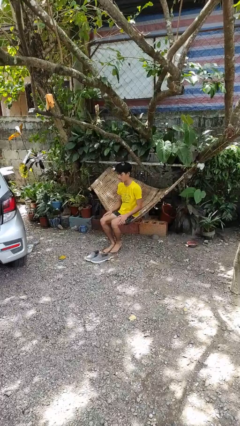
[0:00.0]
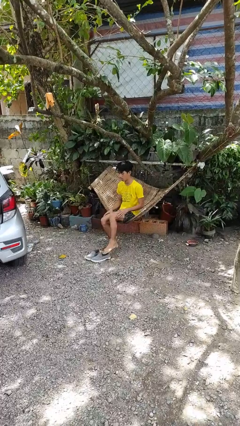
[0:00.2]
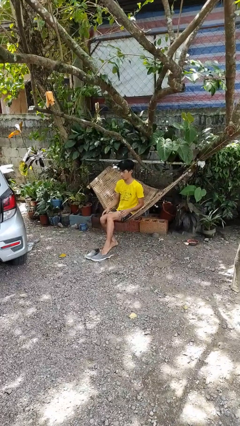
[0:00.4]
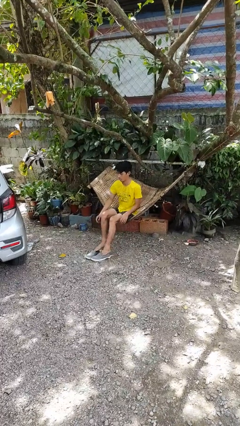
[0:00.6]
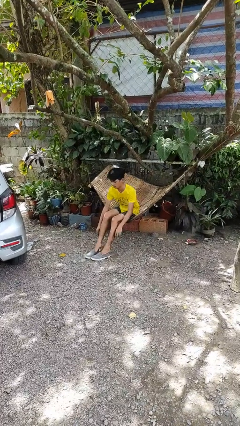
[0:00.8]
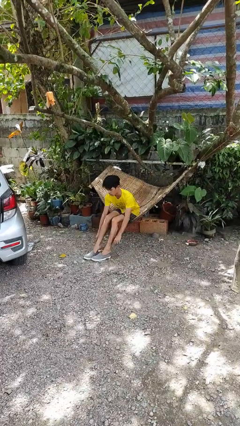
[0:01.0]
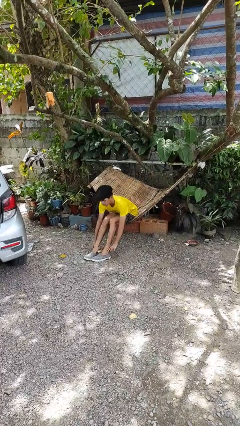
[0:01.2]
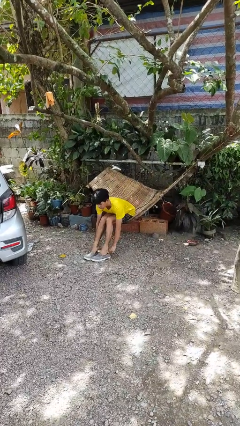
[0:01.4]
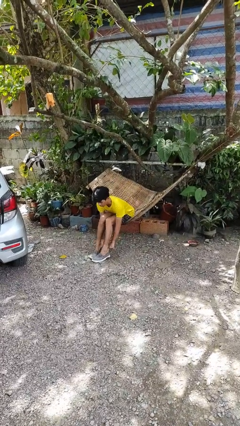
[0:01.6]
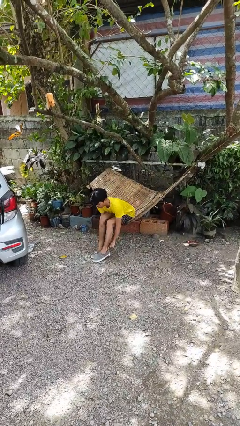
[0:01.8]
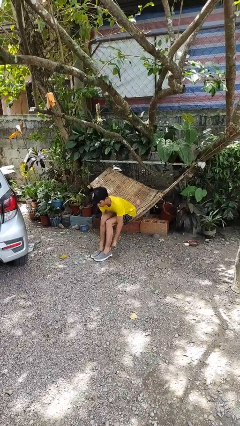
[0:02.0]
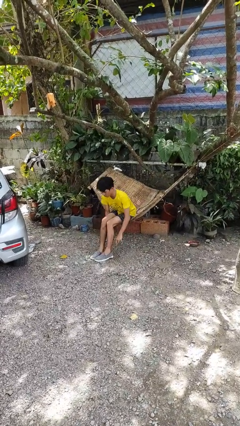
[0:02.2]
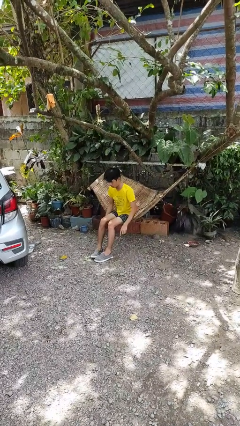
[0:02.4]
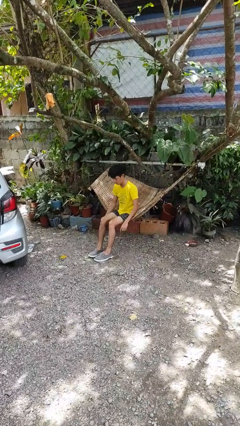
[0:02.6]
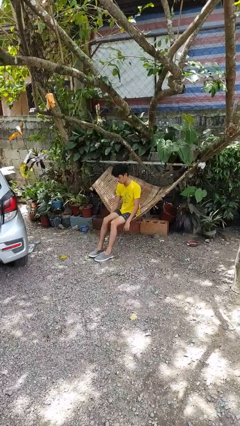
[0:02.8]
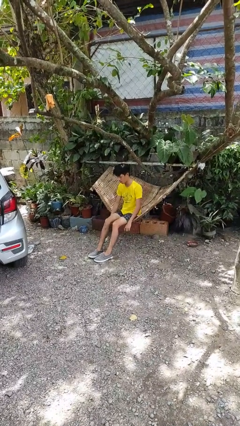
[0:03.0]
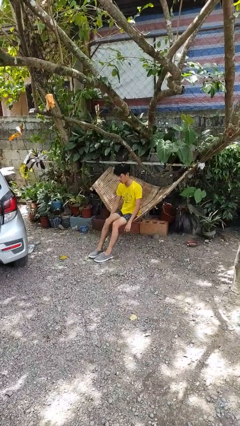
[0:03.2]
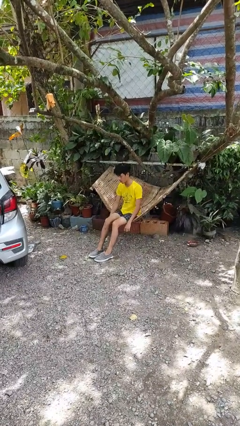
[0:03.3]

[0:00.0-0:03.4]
person puts on shoes

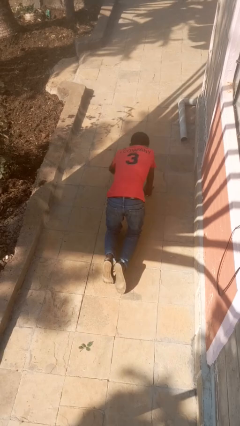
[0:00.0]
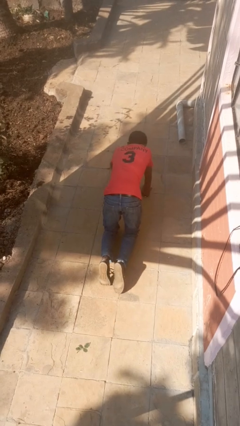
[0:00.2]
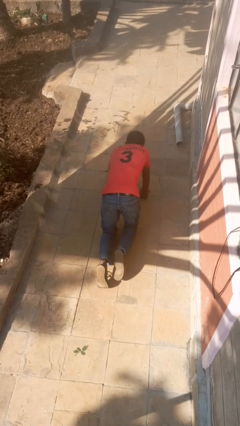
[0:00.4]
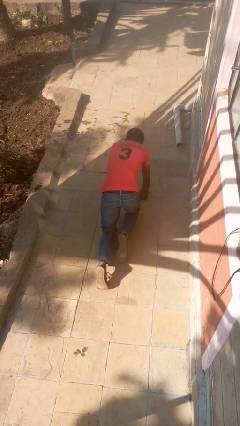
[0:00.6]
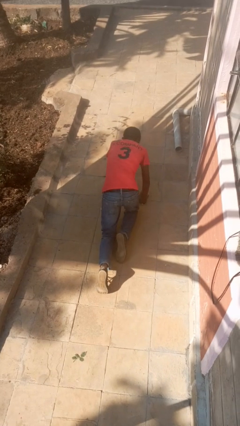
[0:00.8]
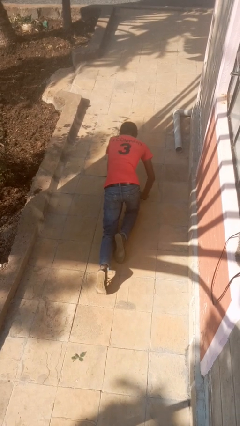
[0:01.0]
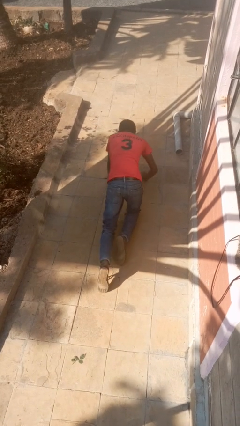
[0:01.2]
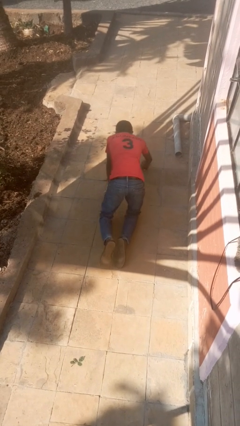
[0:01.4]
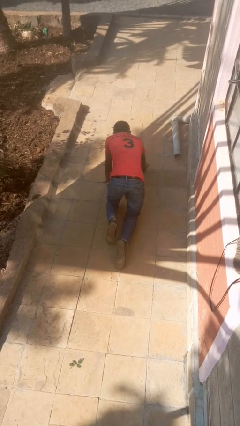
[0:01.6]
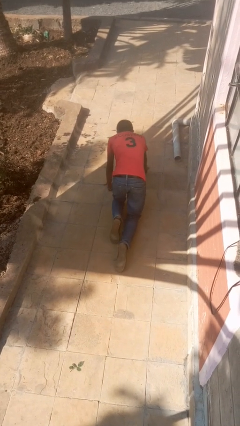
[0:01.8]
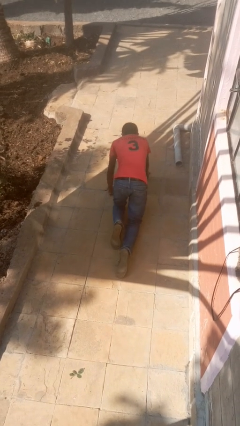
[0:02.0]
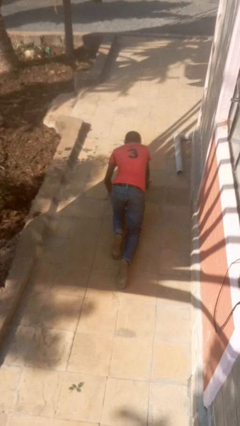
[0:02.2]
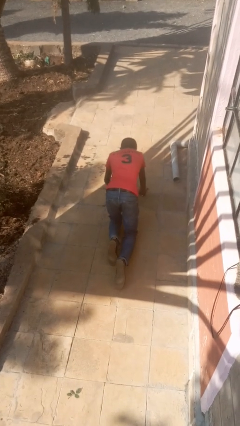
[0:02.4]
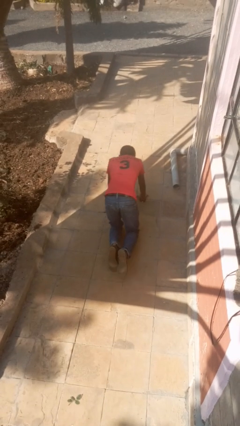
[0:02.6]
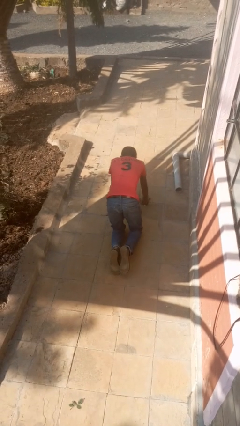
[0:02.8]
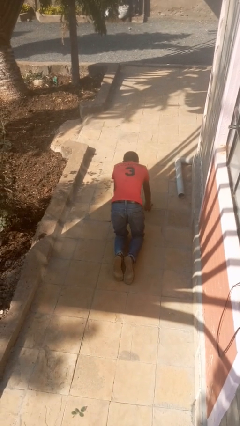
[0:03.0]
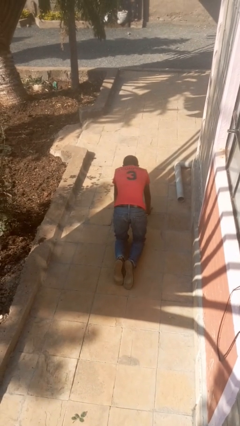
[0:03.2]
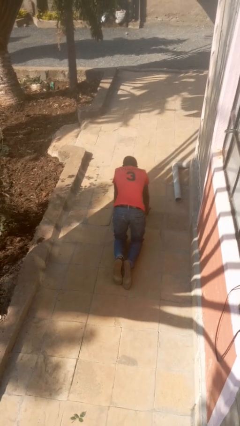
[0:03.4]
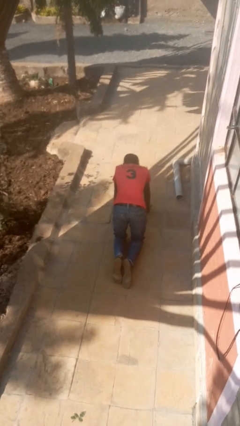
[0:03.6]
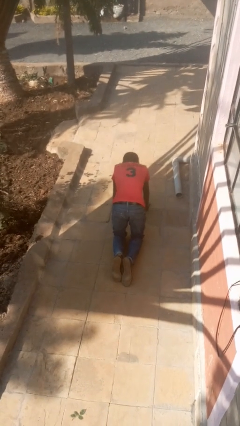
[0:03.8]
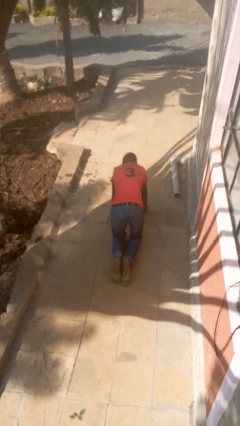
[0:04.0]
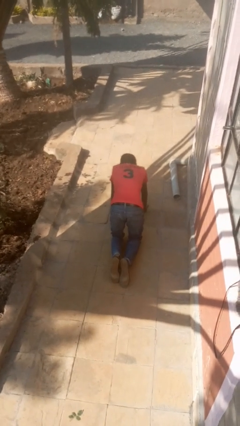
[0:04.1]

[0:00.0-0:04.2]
person crawls

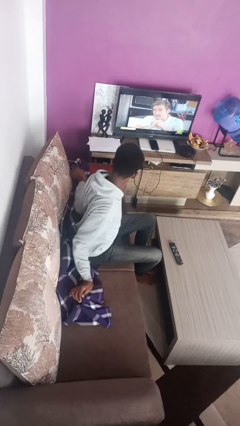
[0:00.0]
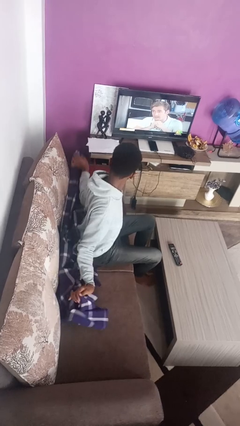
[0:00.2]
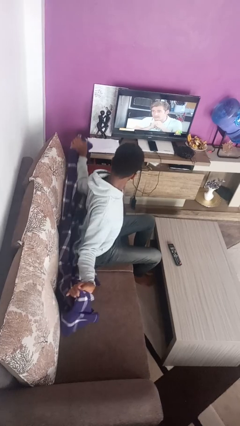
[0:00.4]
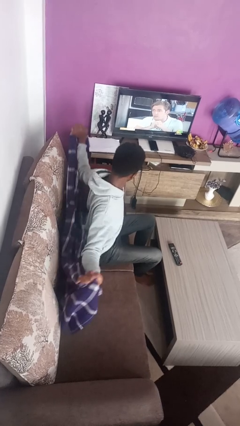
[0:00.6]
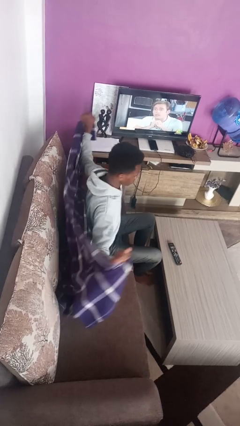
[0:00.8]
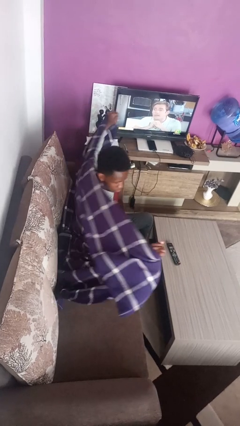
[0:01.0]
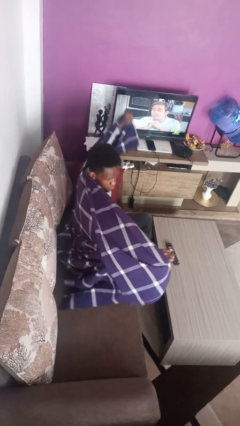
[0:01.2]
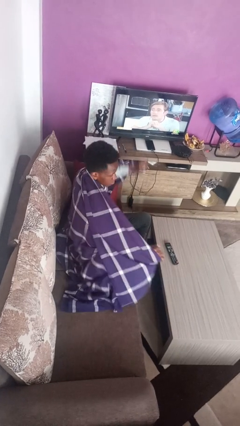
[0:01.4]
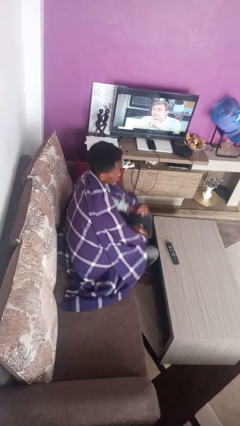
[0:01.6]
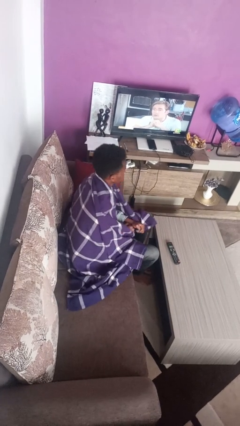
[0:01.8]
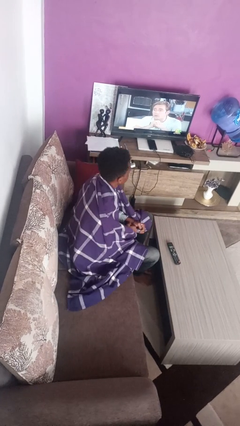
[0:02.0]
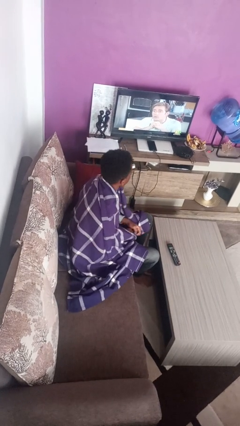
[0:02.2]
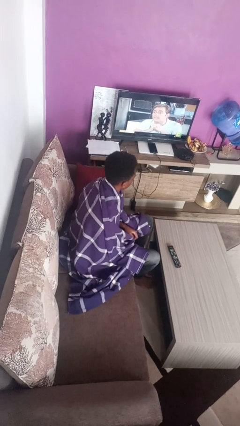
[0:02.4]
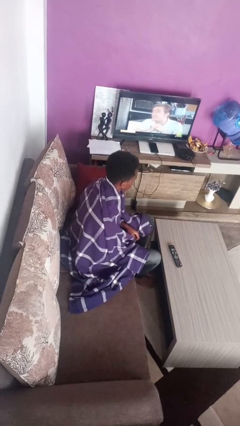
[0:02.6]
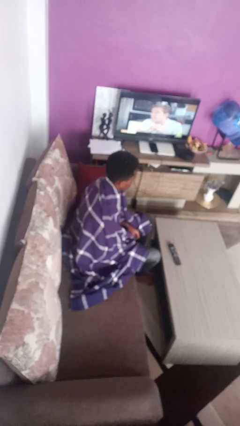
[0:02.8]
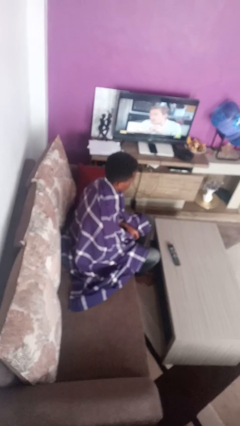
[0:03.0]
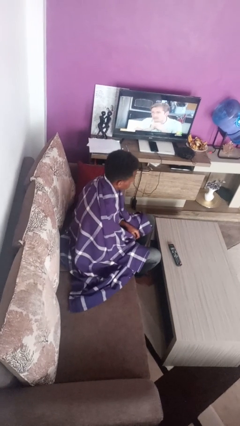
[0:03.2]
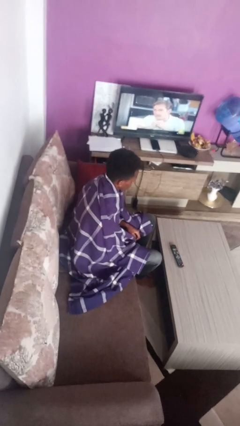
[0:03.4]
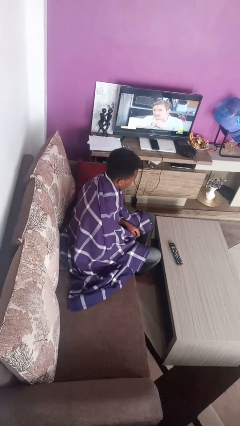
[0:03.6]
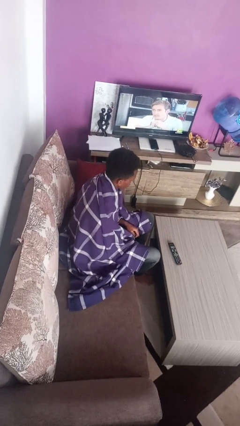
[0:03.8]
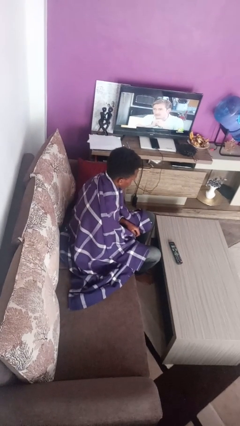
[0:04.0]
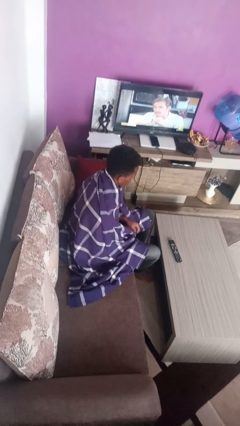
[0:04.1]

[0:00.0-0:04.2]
person covers with blanket

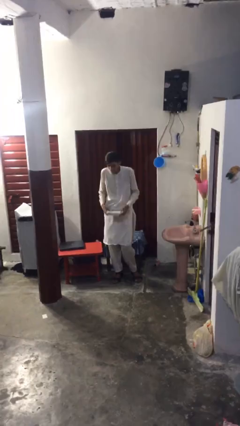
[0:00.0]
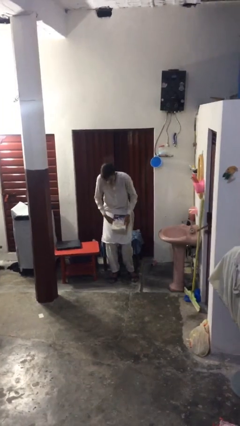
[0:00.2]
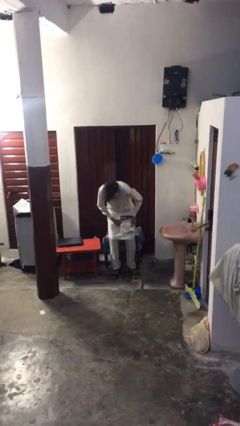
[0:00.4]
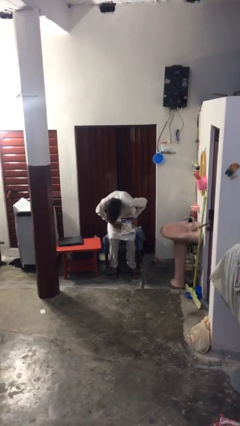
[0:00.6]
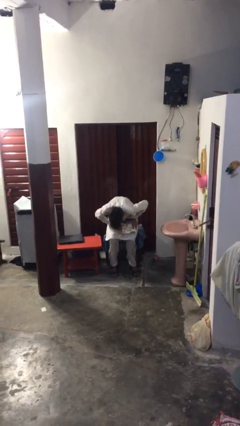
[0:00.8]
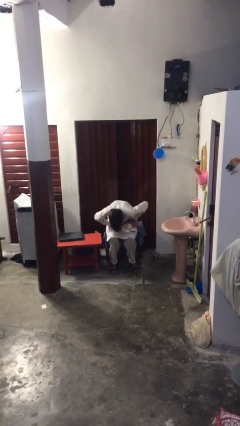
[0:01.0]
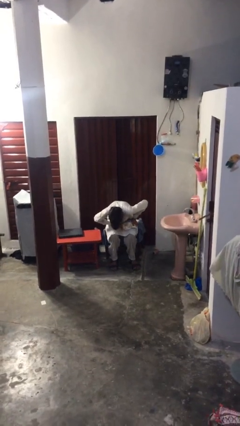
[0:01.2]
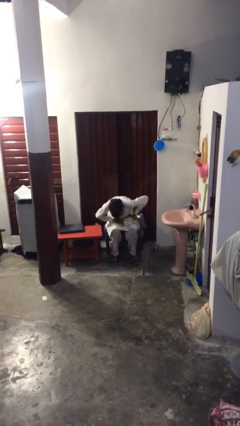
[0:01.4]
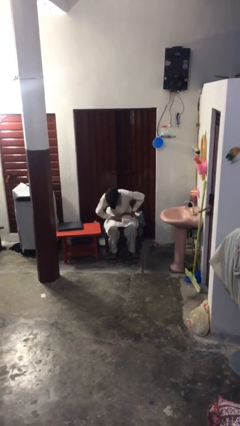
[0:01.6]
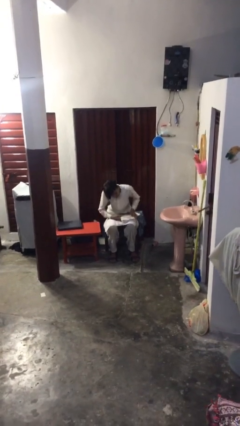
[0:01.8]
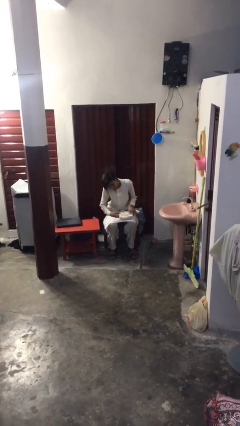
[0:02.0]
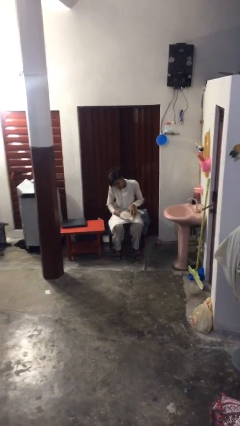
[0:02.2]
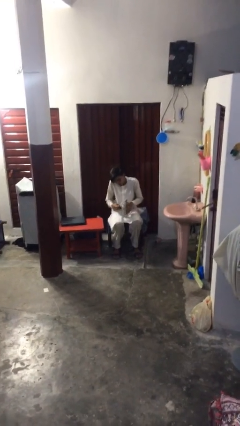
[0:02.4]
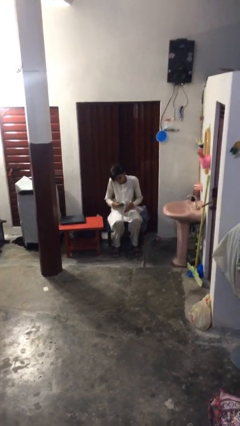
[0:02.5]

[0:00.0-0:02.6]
person sits down

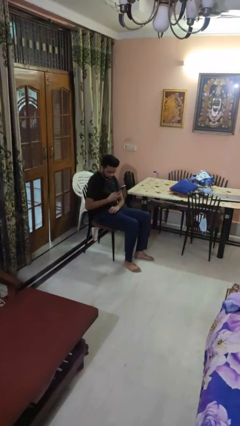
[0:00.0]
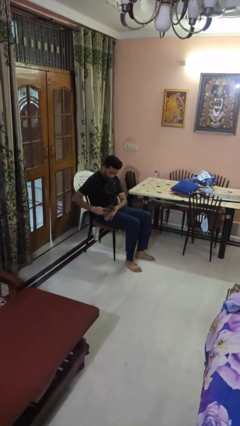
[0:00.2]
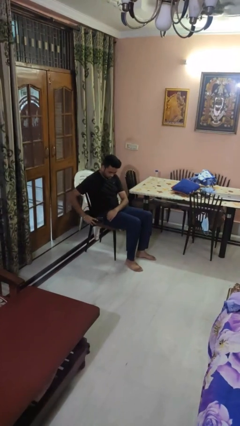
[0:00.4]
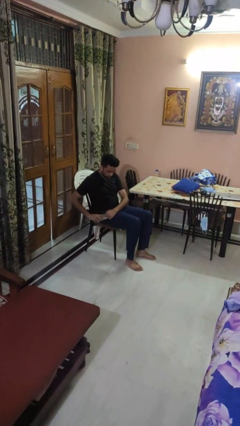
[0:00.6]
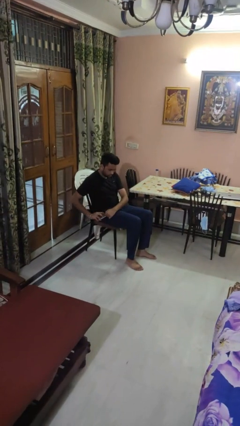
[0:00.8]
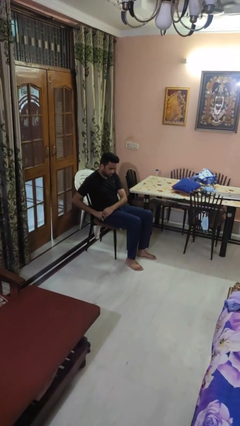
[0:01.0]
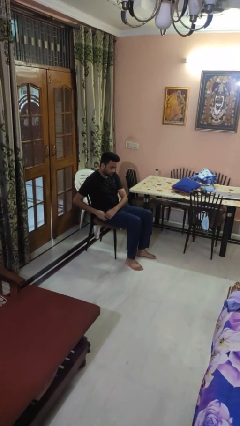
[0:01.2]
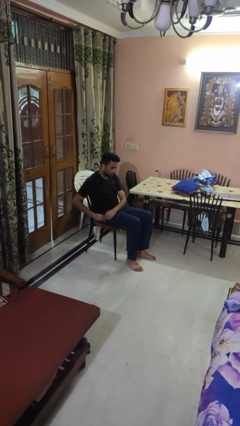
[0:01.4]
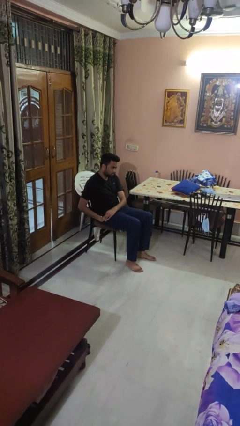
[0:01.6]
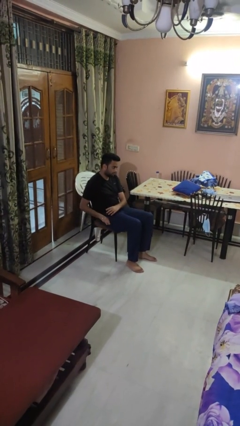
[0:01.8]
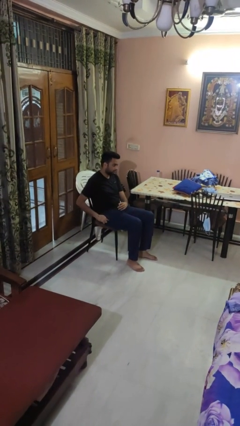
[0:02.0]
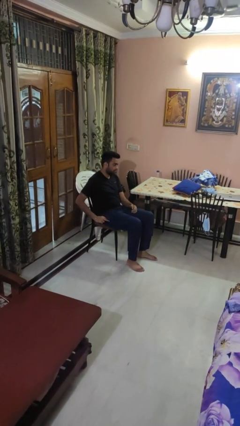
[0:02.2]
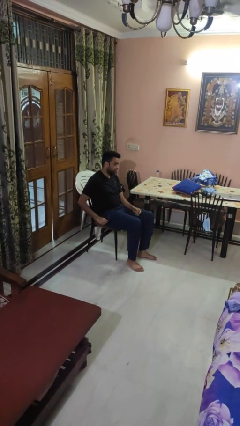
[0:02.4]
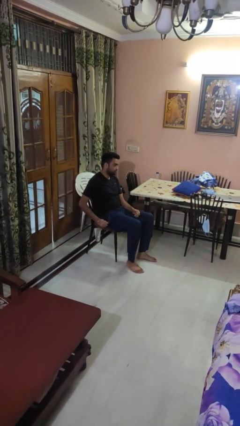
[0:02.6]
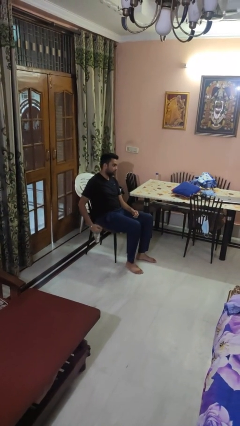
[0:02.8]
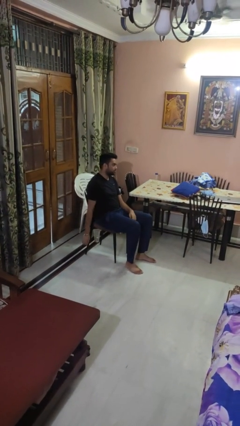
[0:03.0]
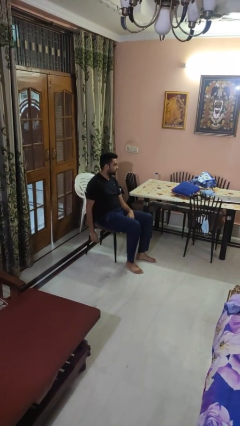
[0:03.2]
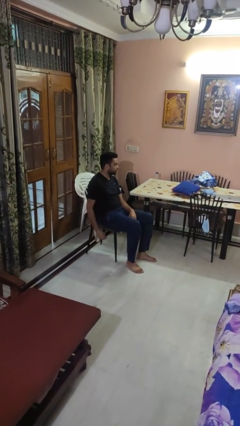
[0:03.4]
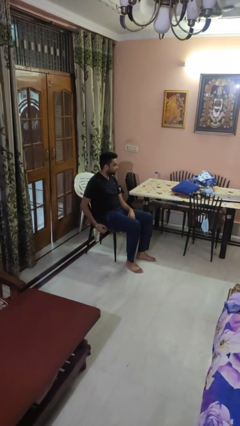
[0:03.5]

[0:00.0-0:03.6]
person puts phone into pocket
